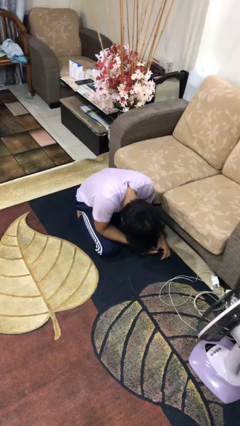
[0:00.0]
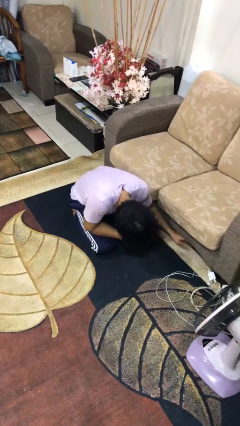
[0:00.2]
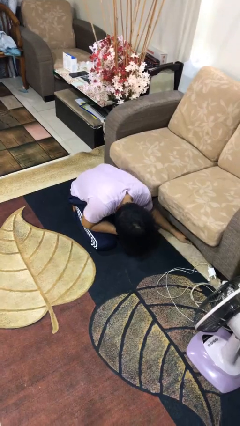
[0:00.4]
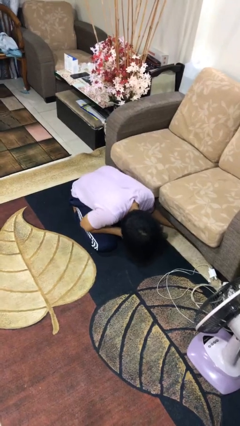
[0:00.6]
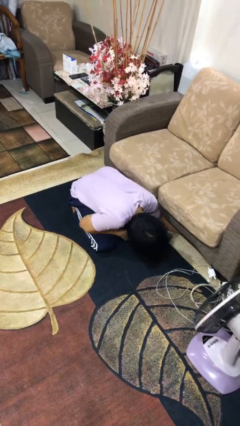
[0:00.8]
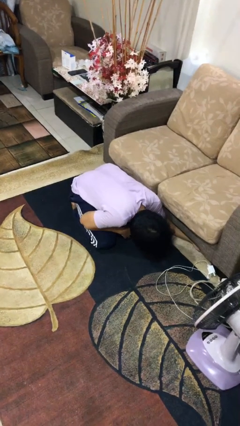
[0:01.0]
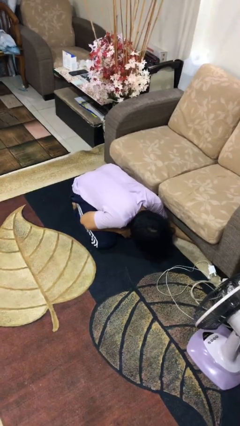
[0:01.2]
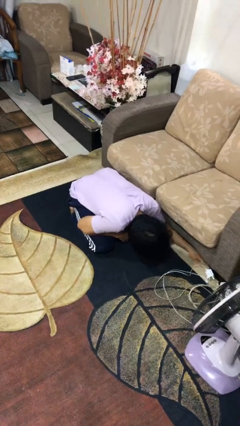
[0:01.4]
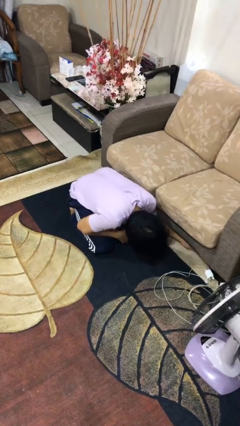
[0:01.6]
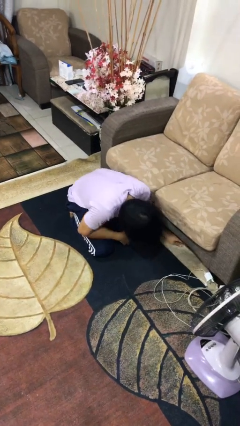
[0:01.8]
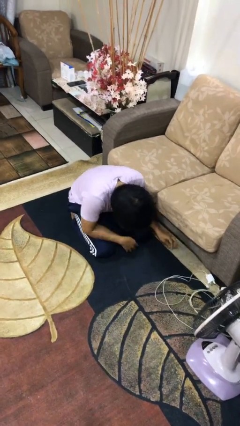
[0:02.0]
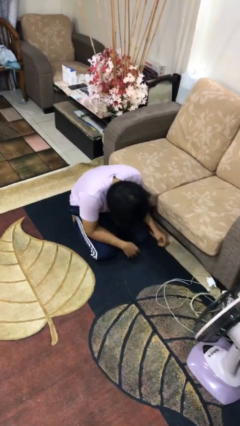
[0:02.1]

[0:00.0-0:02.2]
person searches under couch

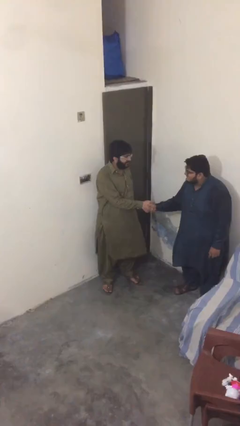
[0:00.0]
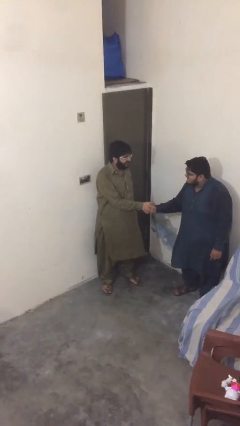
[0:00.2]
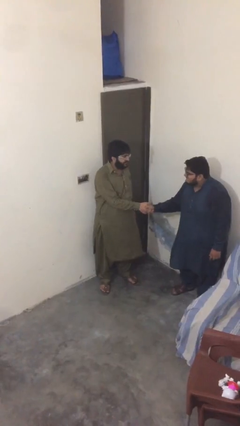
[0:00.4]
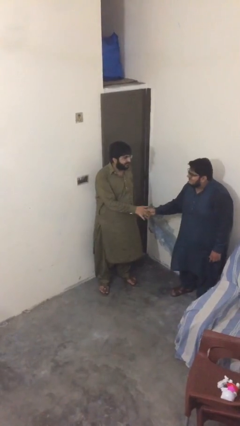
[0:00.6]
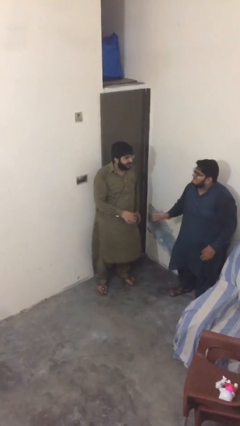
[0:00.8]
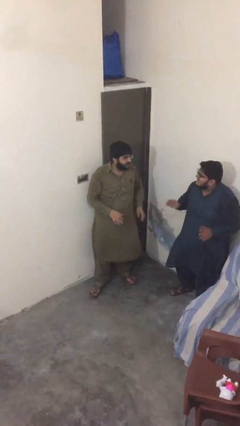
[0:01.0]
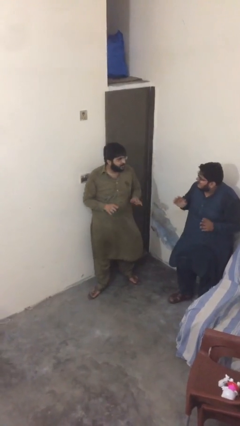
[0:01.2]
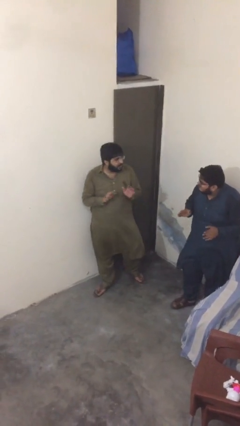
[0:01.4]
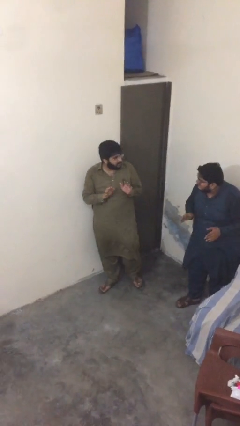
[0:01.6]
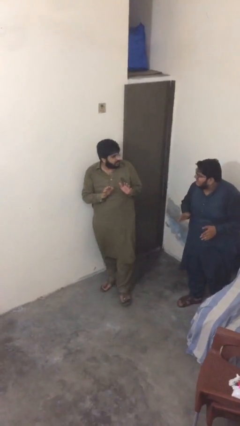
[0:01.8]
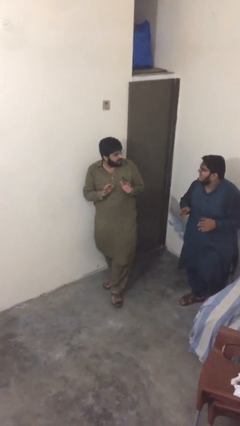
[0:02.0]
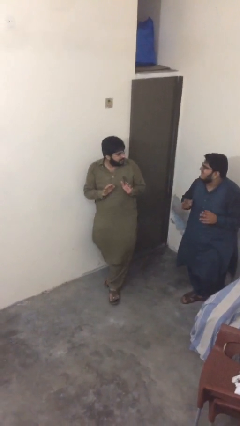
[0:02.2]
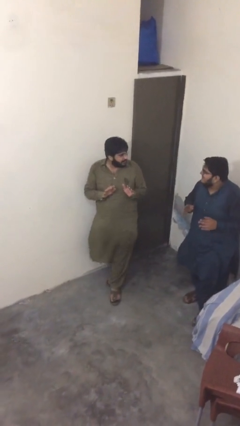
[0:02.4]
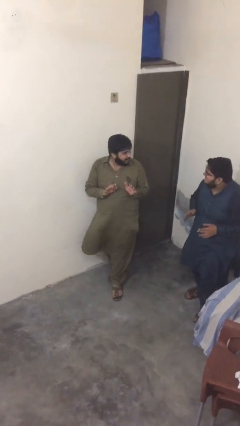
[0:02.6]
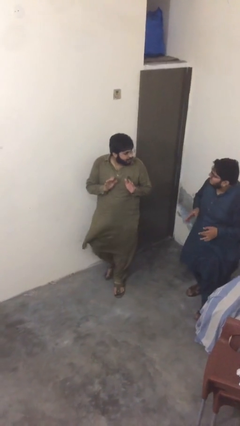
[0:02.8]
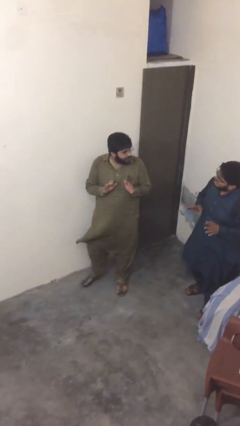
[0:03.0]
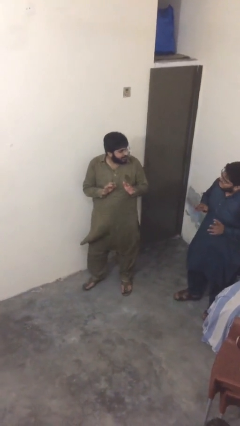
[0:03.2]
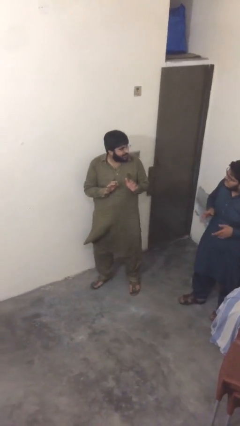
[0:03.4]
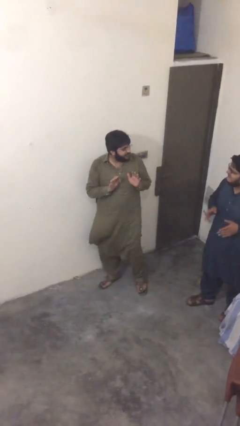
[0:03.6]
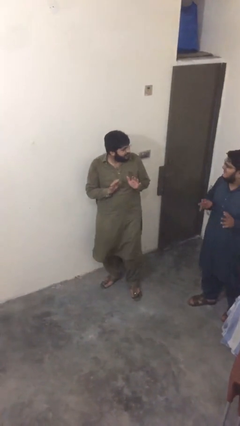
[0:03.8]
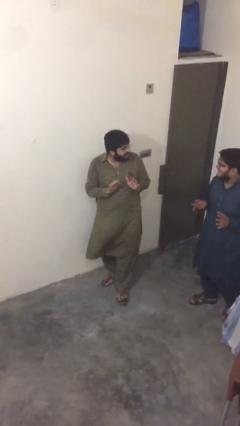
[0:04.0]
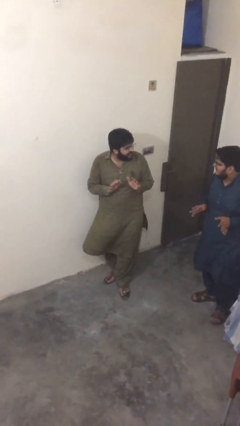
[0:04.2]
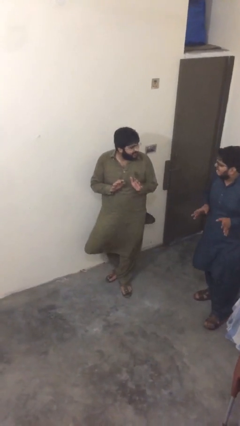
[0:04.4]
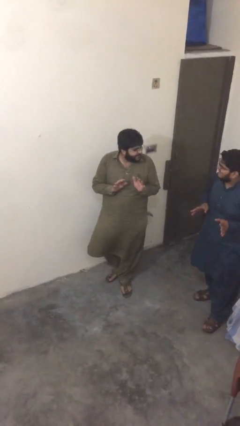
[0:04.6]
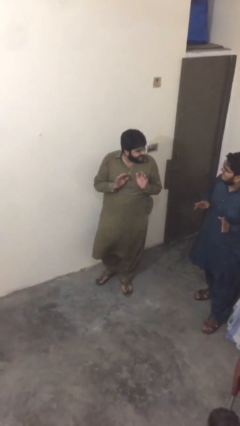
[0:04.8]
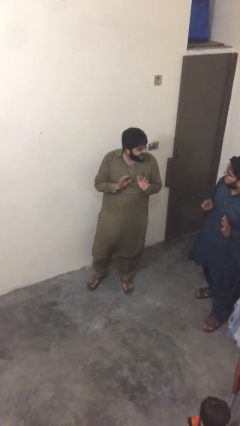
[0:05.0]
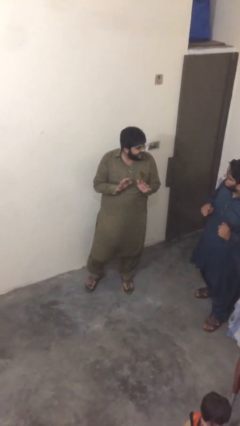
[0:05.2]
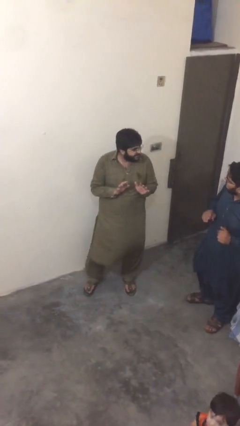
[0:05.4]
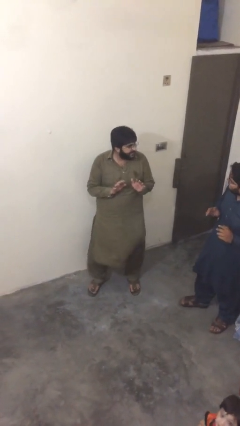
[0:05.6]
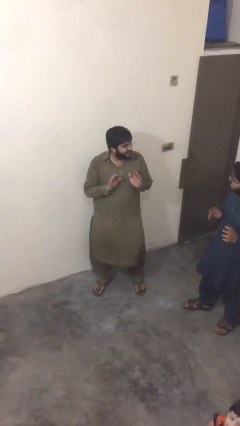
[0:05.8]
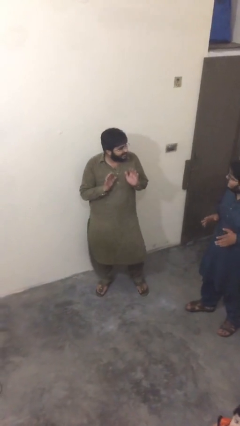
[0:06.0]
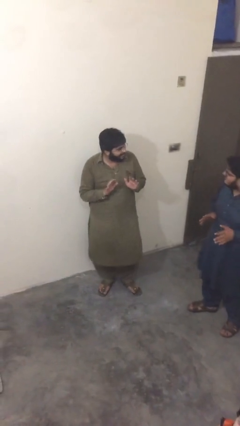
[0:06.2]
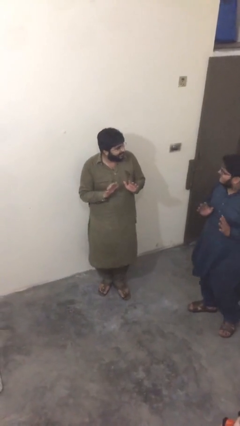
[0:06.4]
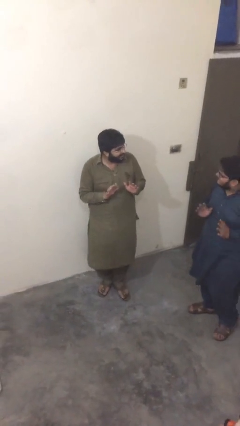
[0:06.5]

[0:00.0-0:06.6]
person talks to person

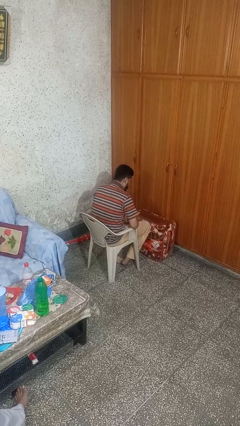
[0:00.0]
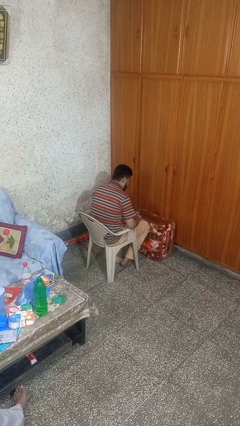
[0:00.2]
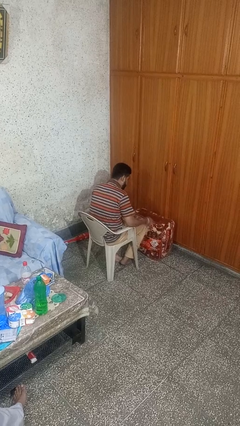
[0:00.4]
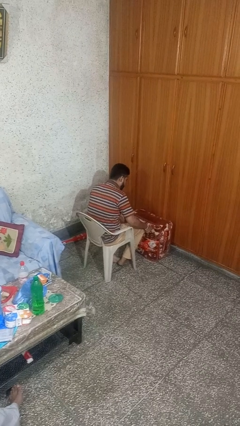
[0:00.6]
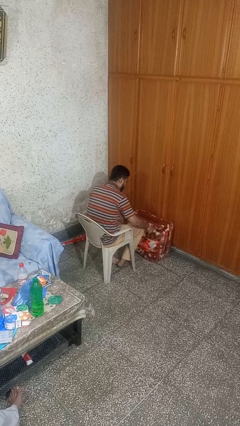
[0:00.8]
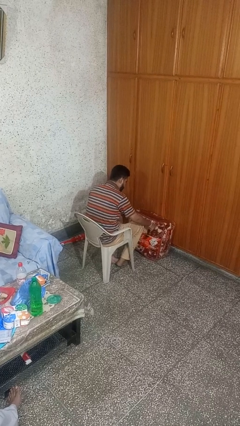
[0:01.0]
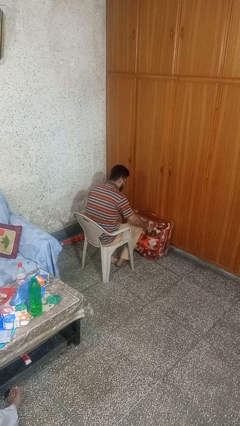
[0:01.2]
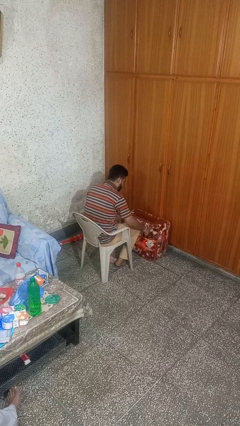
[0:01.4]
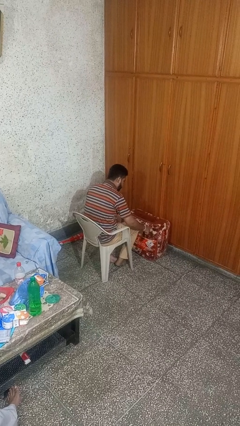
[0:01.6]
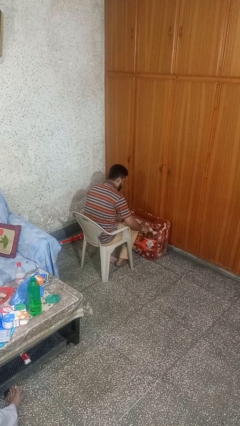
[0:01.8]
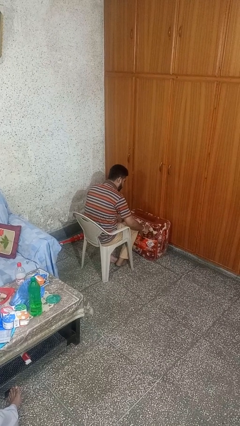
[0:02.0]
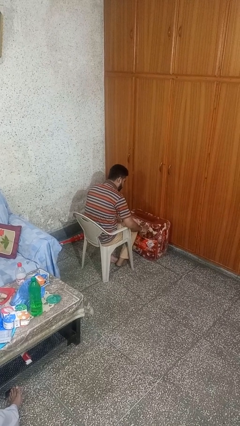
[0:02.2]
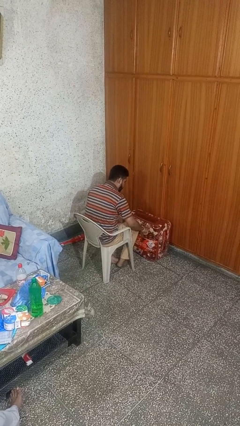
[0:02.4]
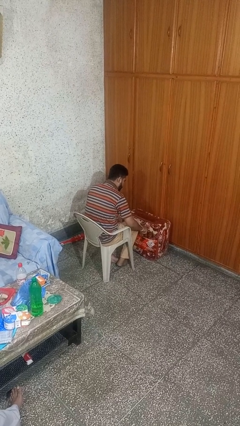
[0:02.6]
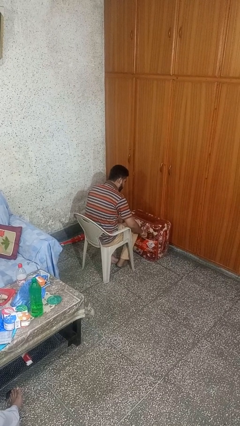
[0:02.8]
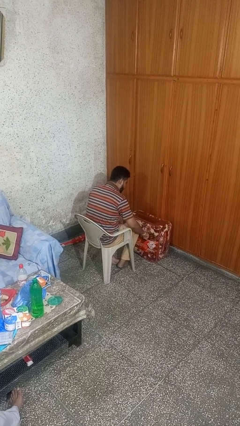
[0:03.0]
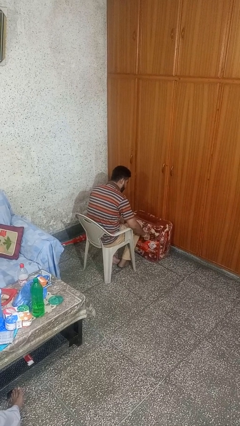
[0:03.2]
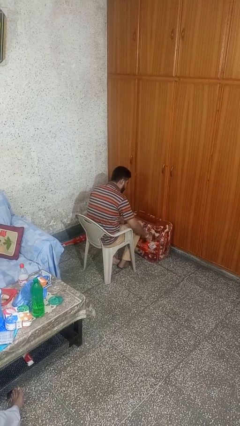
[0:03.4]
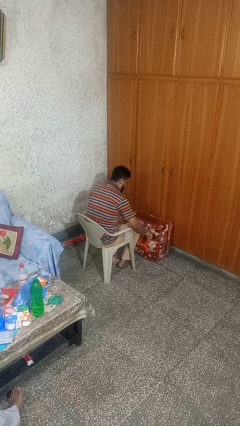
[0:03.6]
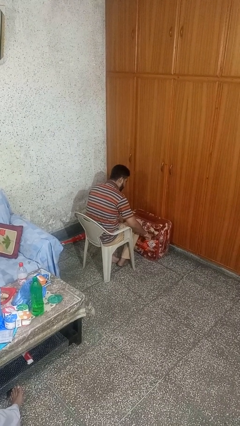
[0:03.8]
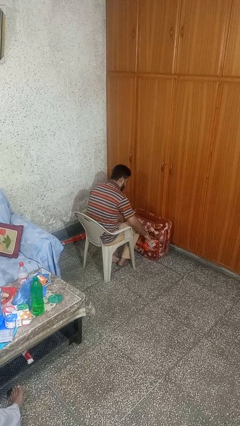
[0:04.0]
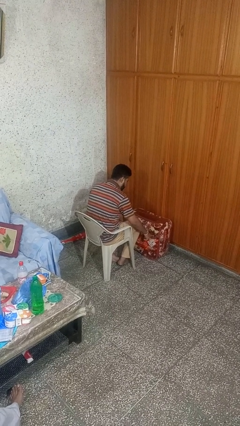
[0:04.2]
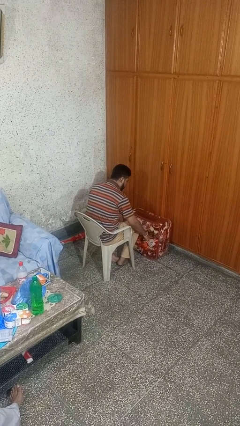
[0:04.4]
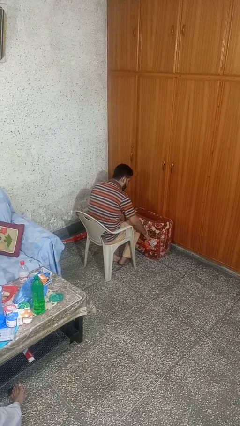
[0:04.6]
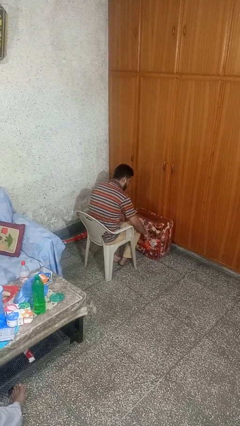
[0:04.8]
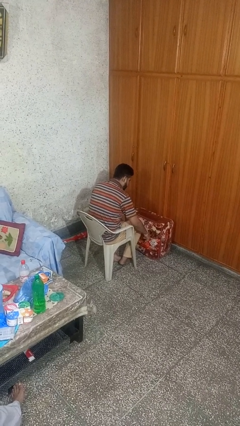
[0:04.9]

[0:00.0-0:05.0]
person taps object with finger

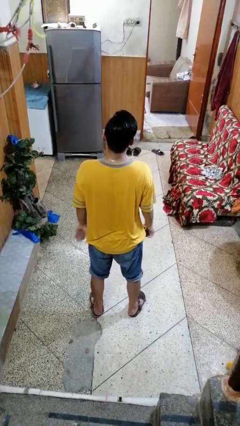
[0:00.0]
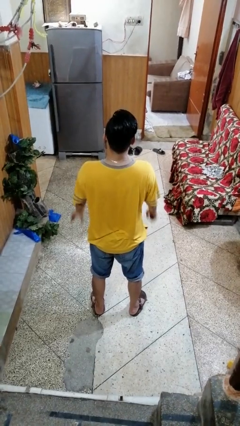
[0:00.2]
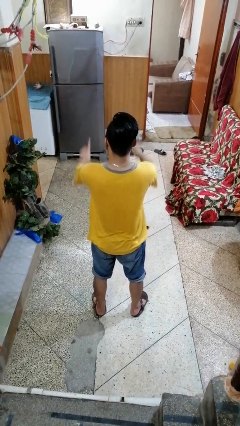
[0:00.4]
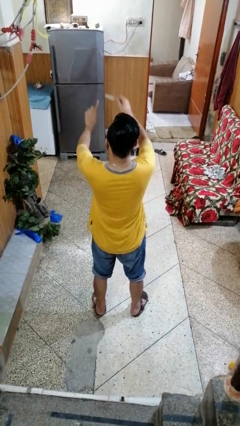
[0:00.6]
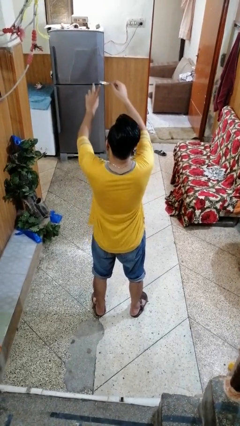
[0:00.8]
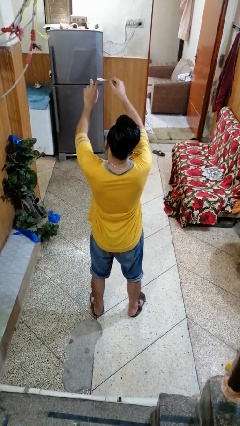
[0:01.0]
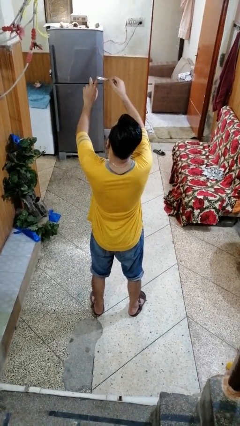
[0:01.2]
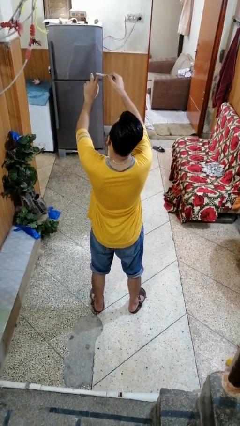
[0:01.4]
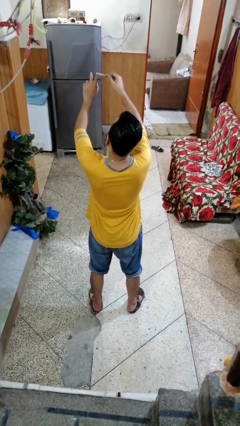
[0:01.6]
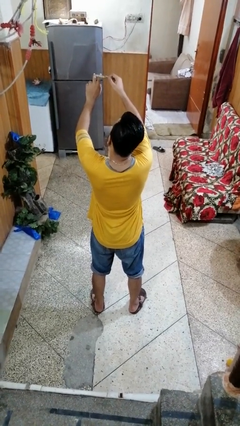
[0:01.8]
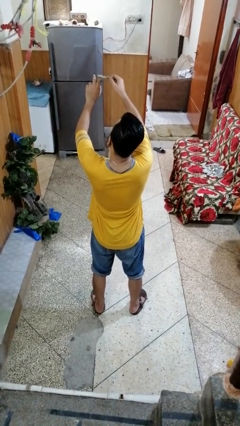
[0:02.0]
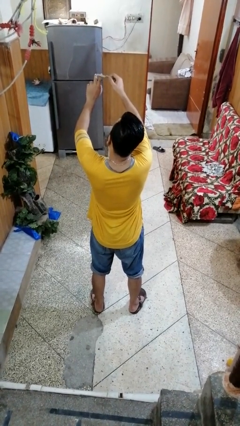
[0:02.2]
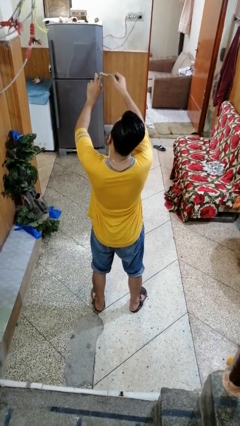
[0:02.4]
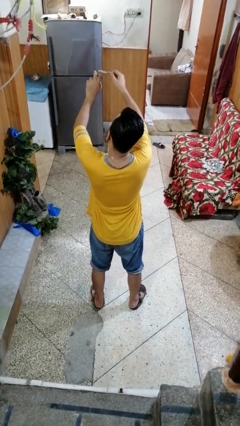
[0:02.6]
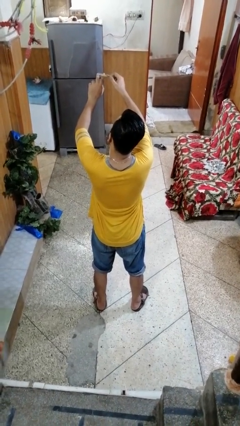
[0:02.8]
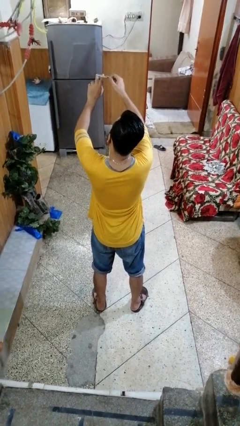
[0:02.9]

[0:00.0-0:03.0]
person files fingernails

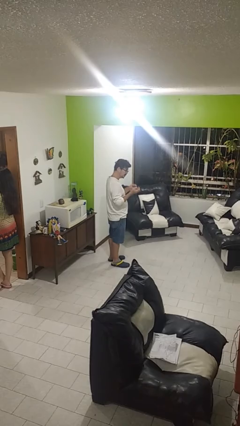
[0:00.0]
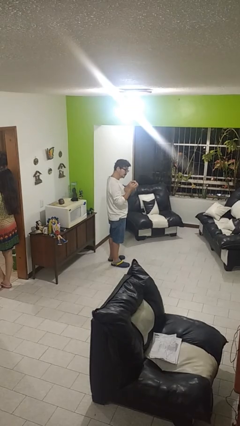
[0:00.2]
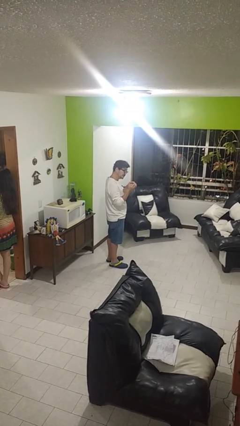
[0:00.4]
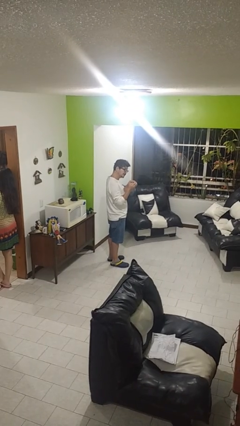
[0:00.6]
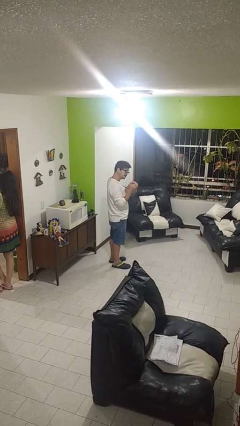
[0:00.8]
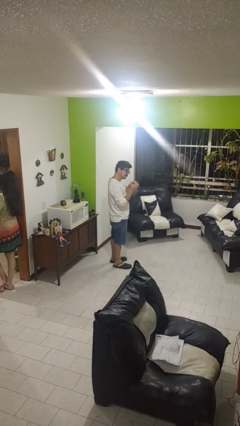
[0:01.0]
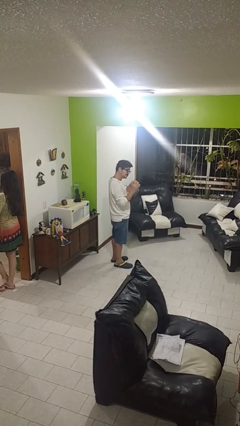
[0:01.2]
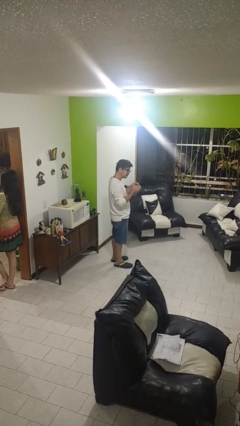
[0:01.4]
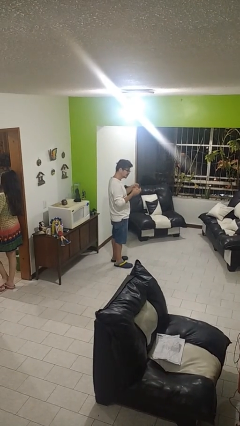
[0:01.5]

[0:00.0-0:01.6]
person clips fingernails
